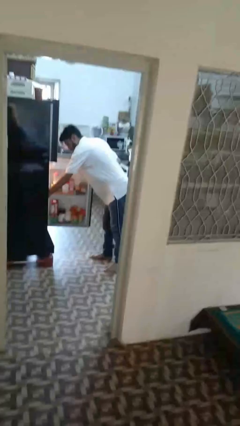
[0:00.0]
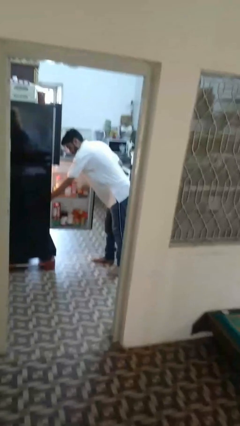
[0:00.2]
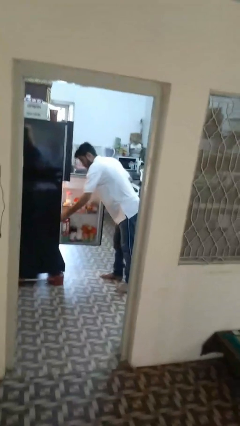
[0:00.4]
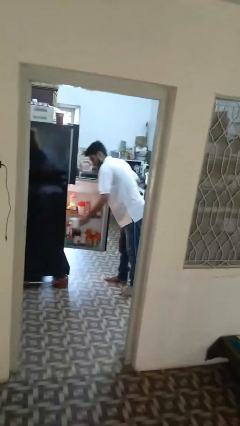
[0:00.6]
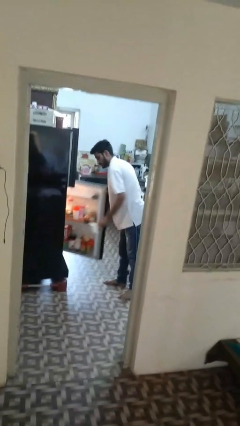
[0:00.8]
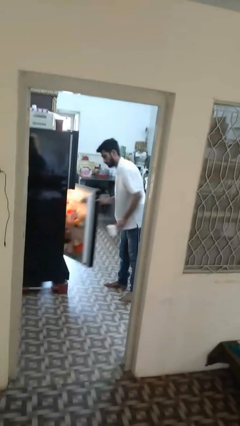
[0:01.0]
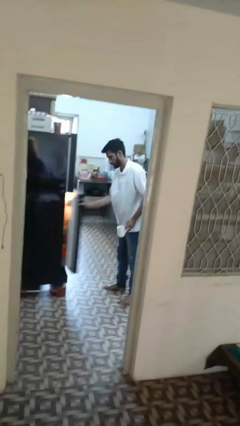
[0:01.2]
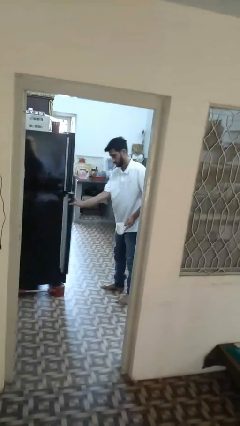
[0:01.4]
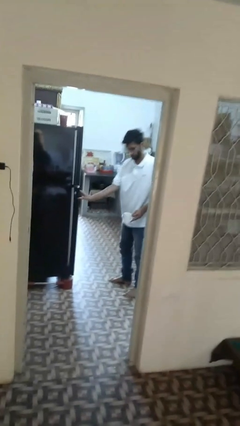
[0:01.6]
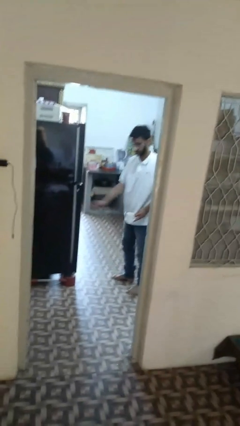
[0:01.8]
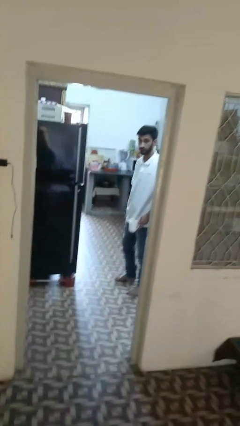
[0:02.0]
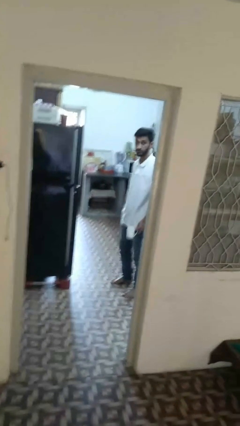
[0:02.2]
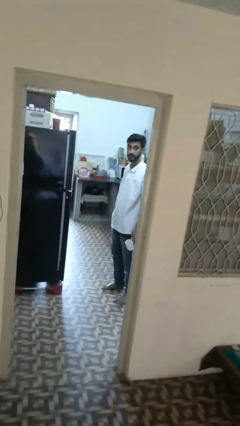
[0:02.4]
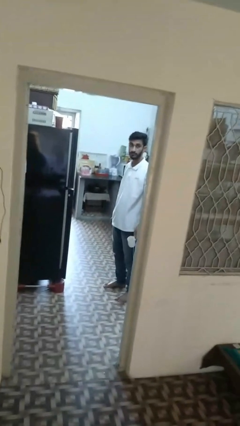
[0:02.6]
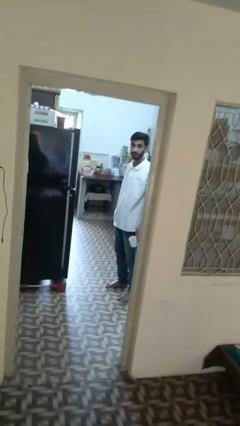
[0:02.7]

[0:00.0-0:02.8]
person takes object from refrigerator

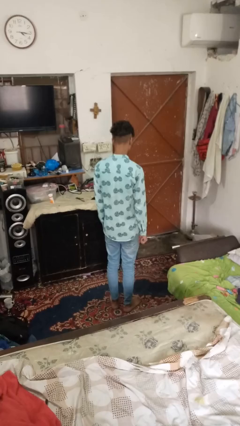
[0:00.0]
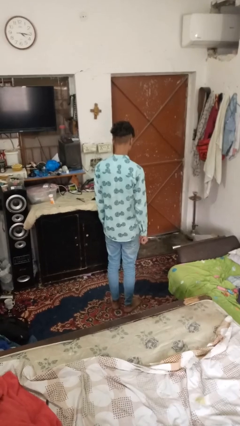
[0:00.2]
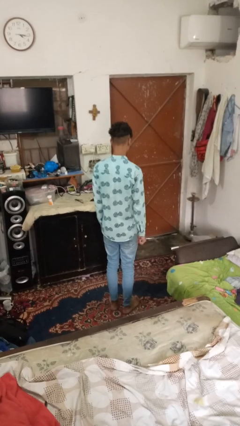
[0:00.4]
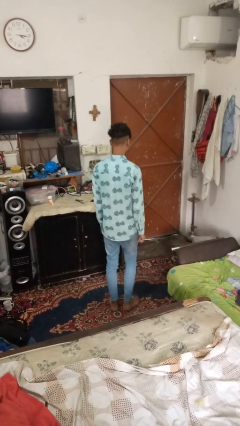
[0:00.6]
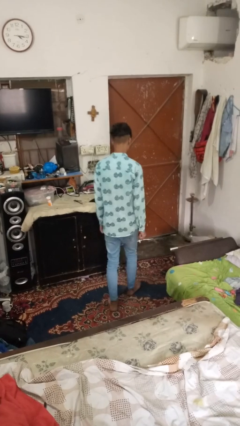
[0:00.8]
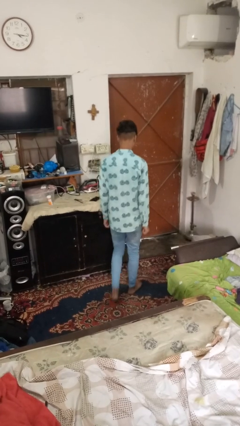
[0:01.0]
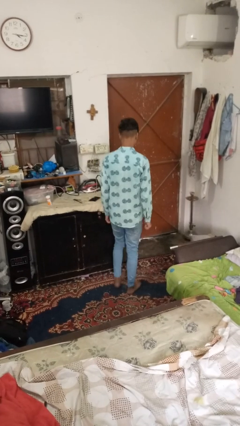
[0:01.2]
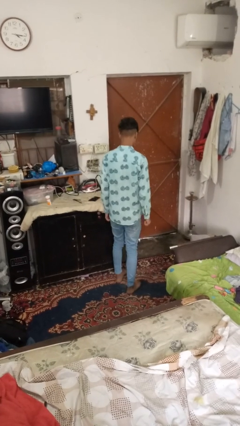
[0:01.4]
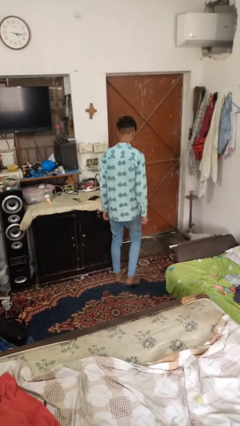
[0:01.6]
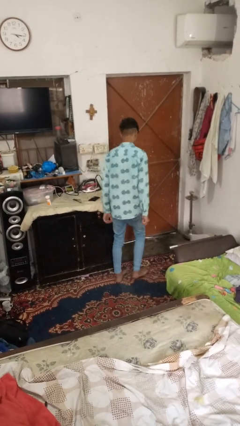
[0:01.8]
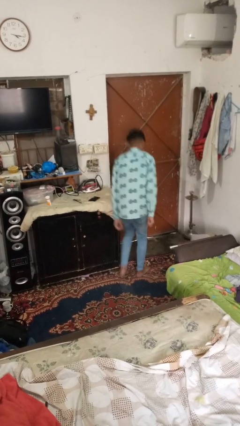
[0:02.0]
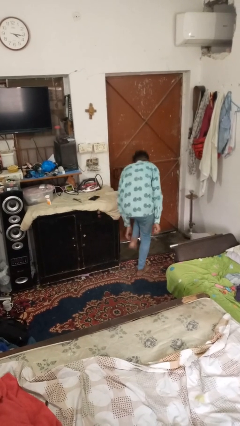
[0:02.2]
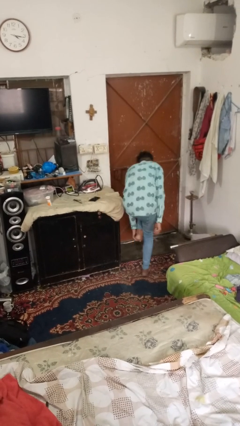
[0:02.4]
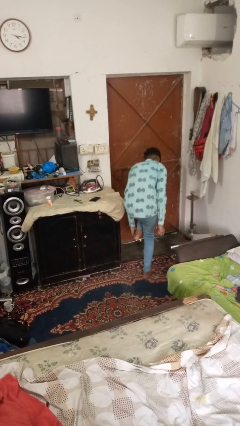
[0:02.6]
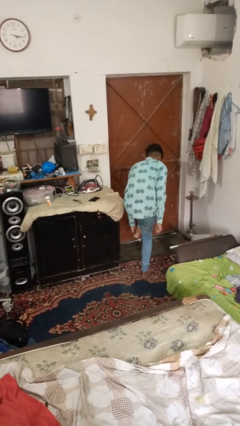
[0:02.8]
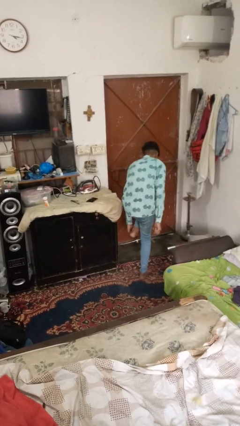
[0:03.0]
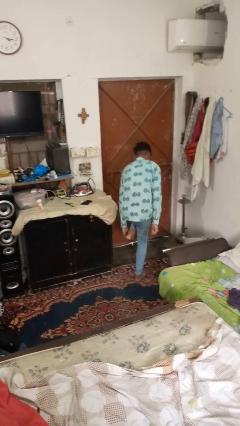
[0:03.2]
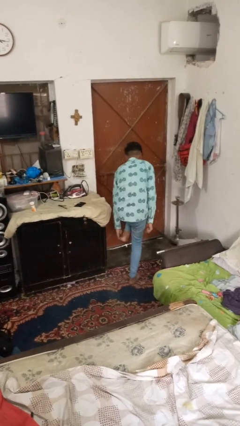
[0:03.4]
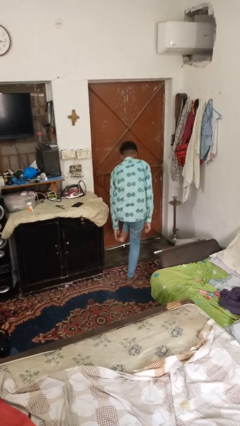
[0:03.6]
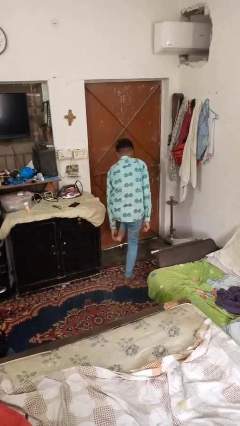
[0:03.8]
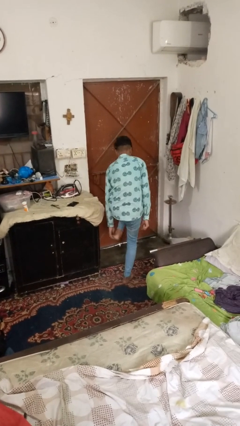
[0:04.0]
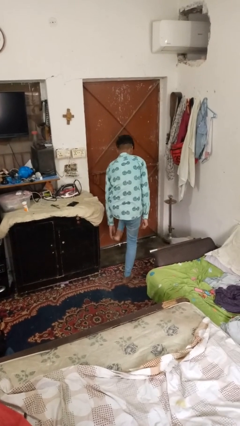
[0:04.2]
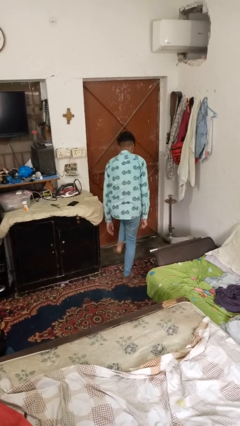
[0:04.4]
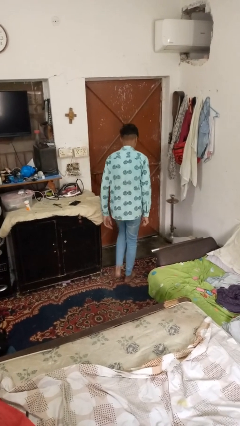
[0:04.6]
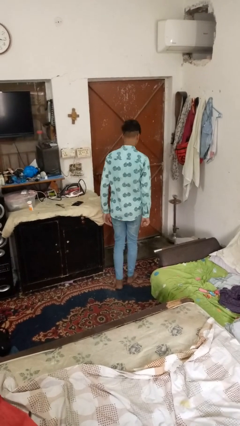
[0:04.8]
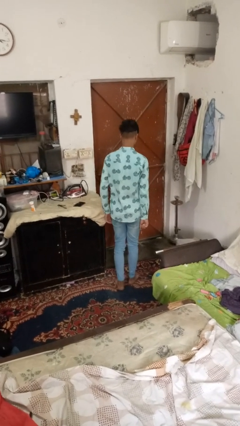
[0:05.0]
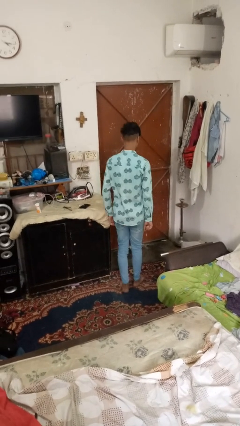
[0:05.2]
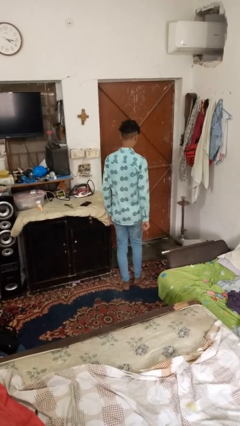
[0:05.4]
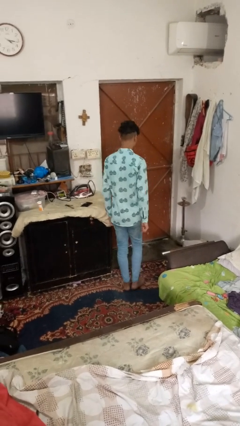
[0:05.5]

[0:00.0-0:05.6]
person stubs toe

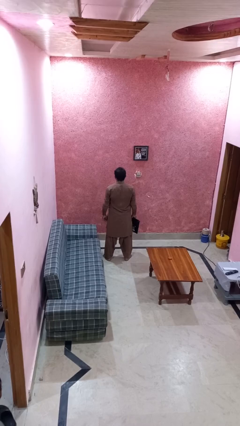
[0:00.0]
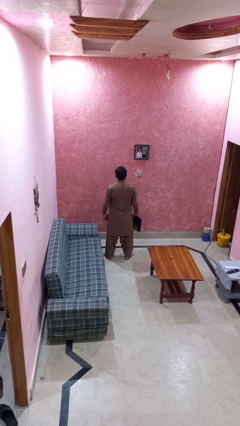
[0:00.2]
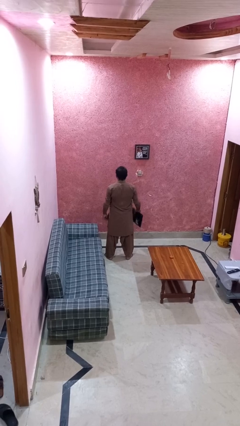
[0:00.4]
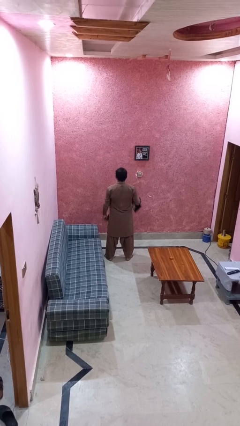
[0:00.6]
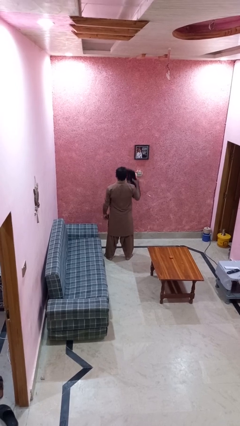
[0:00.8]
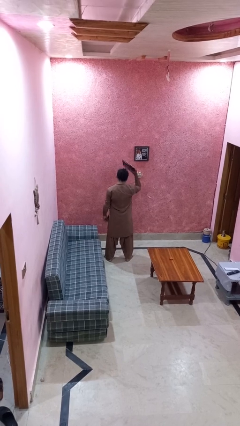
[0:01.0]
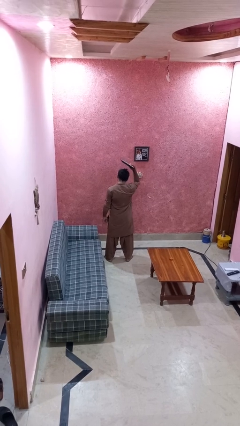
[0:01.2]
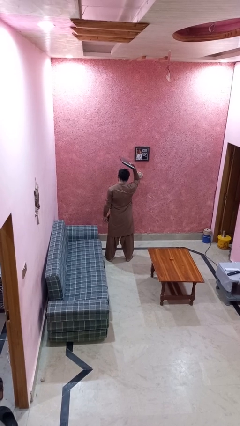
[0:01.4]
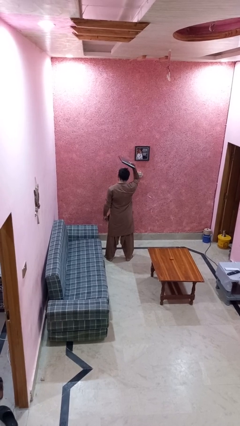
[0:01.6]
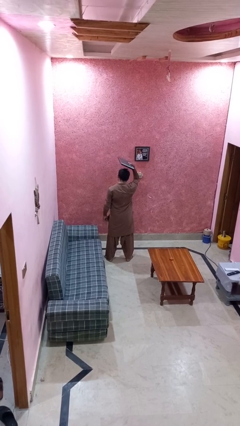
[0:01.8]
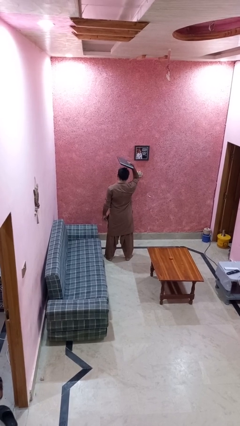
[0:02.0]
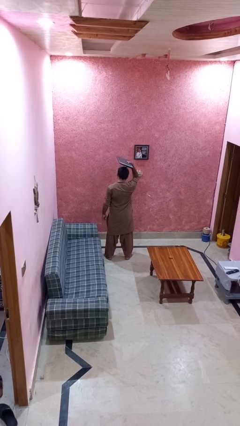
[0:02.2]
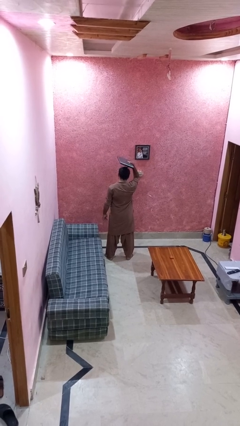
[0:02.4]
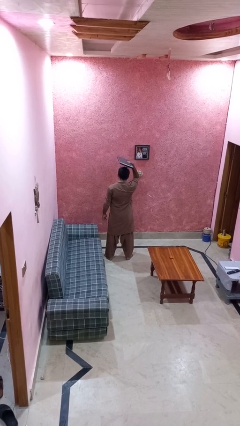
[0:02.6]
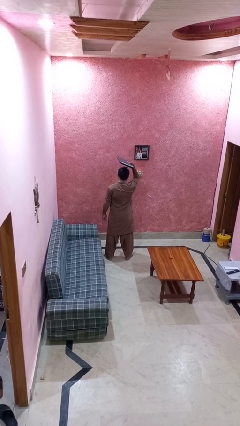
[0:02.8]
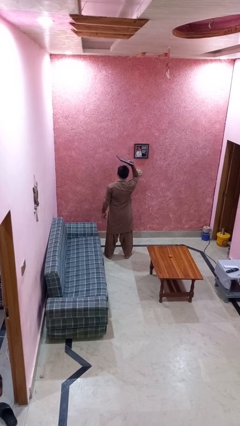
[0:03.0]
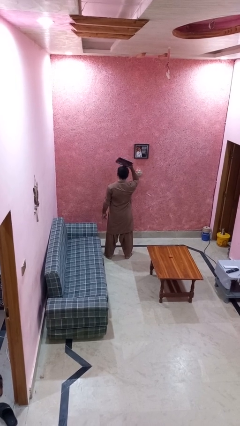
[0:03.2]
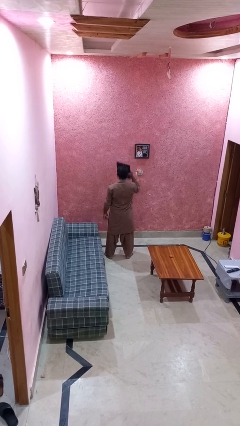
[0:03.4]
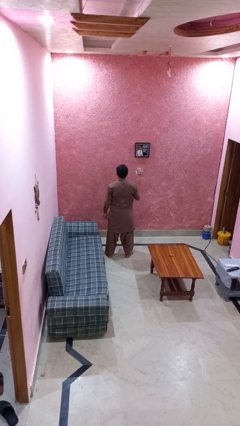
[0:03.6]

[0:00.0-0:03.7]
person holds object above head

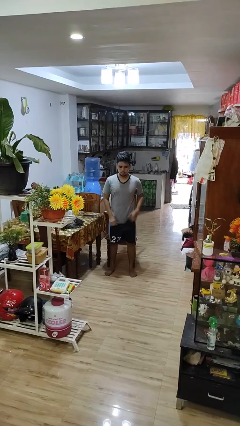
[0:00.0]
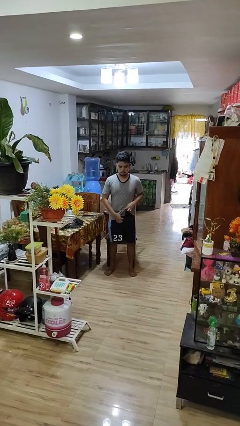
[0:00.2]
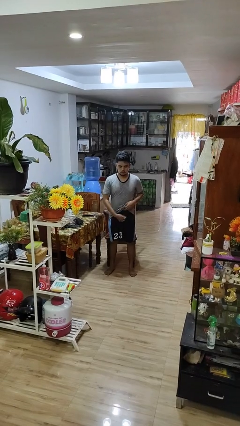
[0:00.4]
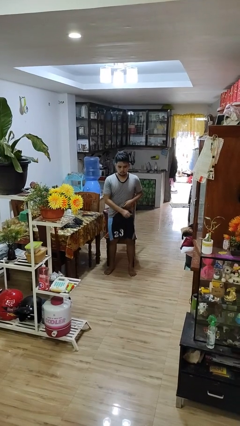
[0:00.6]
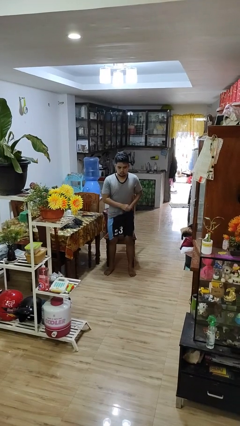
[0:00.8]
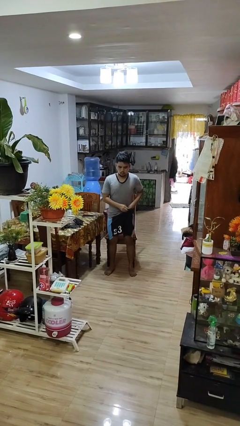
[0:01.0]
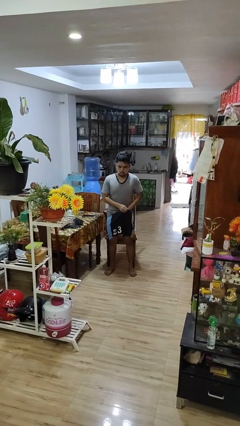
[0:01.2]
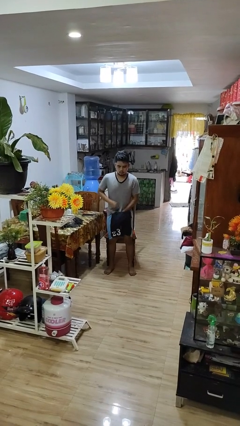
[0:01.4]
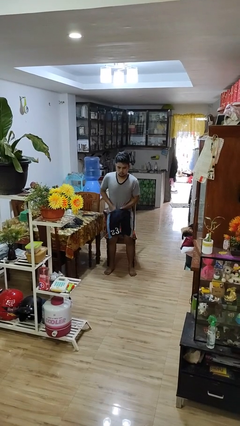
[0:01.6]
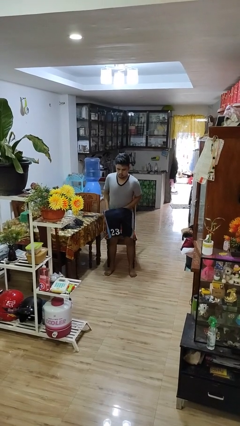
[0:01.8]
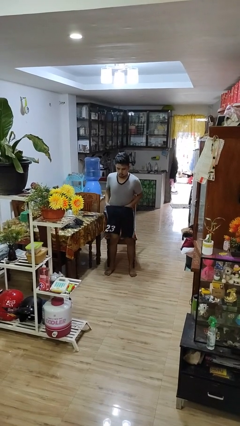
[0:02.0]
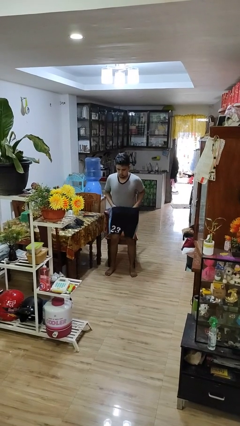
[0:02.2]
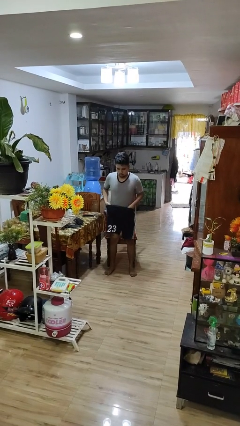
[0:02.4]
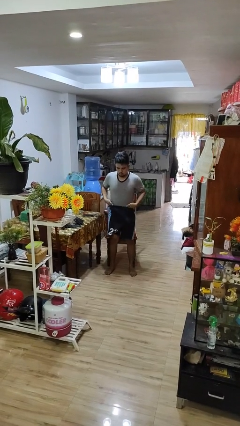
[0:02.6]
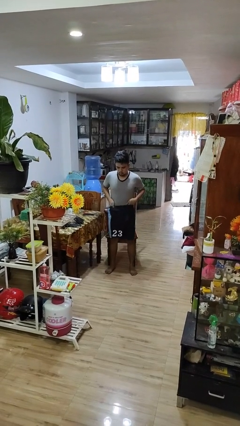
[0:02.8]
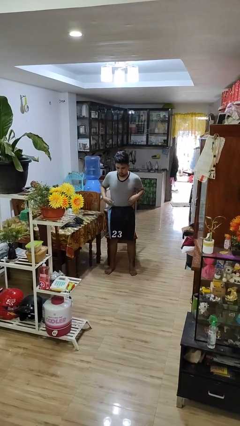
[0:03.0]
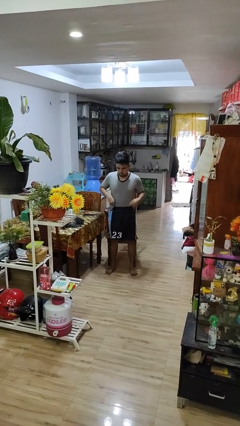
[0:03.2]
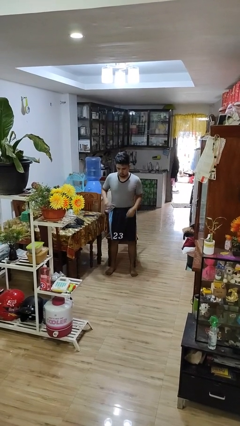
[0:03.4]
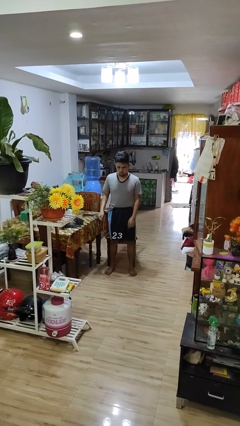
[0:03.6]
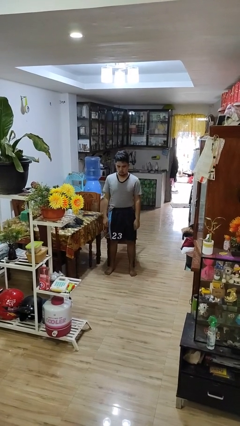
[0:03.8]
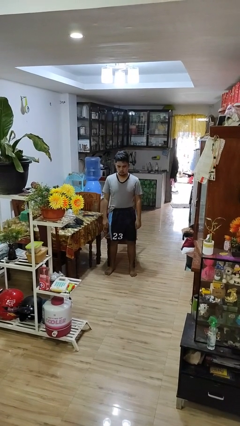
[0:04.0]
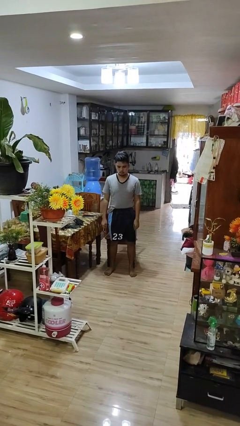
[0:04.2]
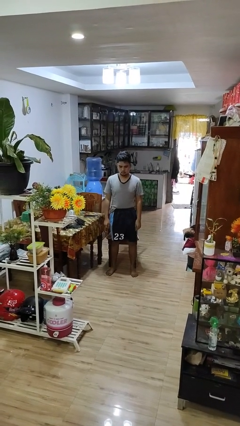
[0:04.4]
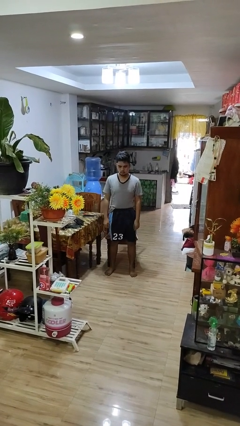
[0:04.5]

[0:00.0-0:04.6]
person tucks in shirt

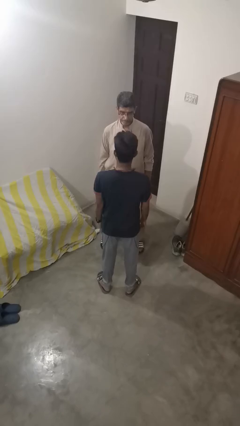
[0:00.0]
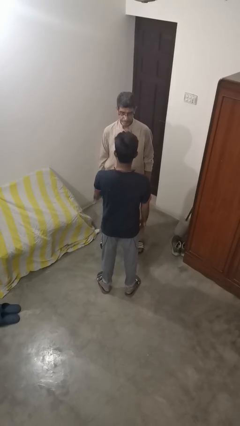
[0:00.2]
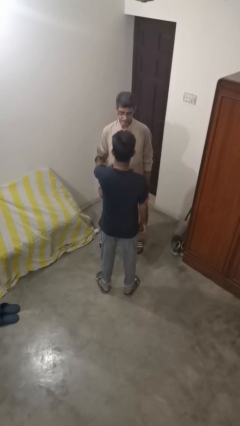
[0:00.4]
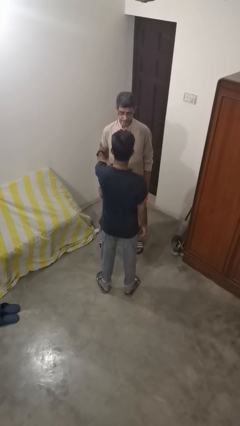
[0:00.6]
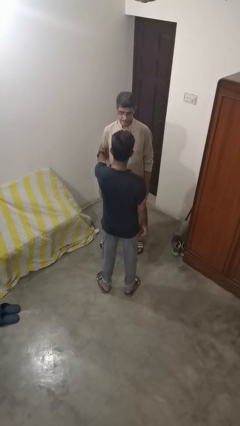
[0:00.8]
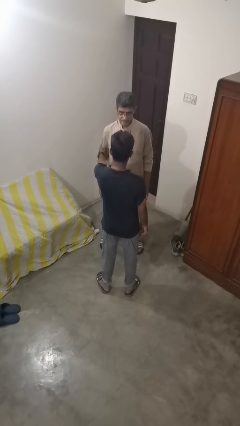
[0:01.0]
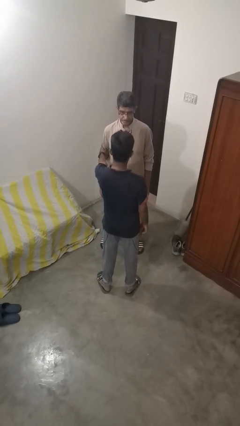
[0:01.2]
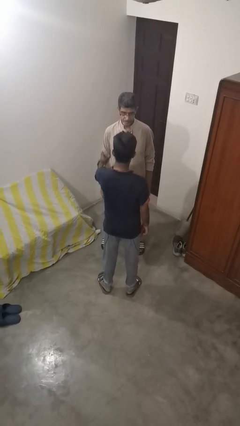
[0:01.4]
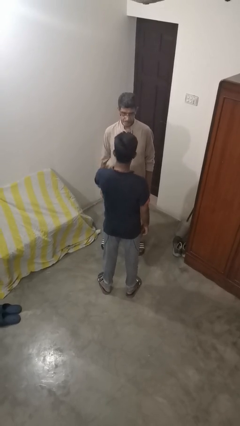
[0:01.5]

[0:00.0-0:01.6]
person grabs person by bicep
